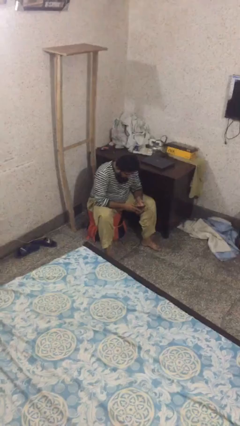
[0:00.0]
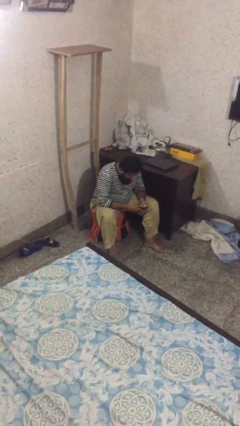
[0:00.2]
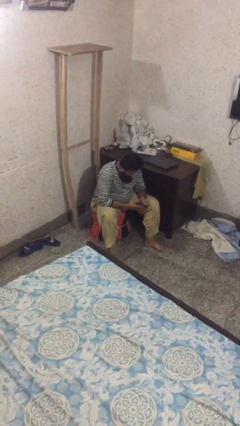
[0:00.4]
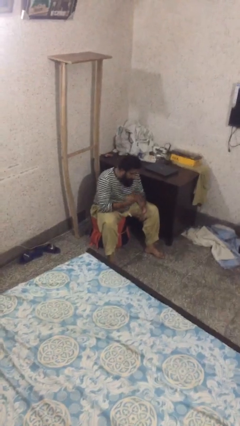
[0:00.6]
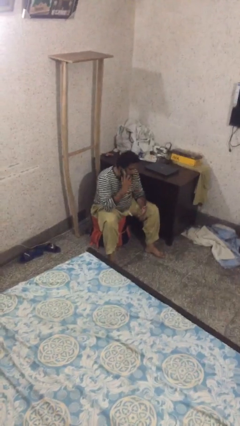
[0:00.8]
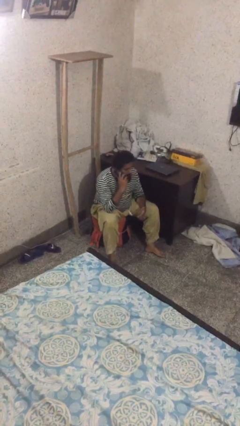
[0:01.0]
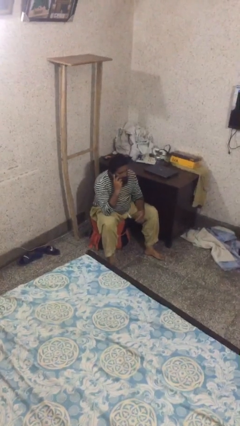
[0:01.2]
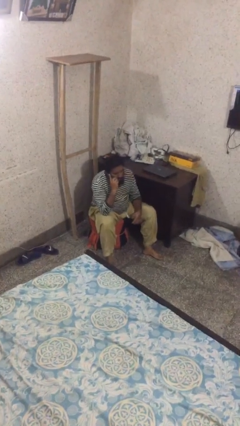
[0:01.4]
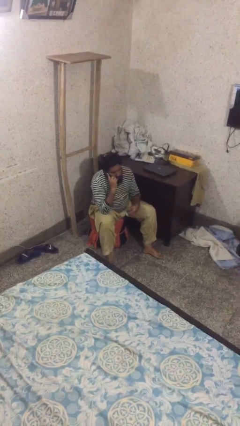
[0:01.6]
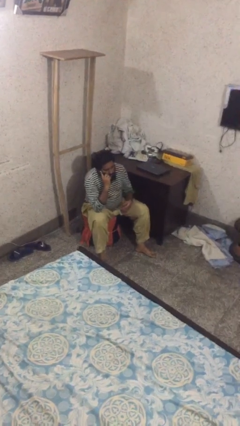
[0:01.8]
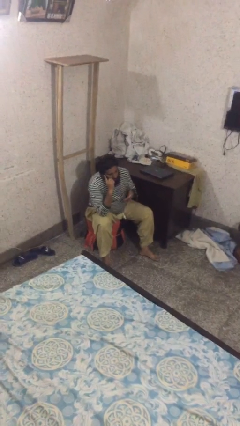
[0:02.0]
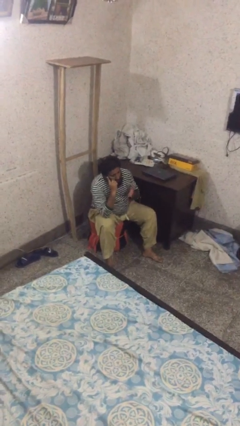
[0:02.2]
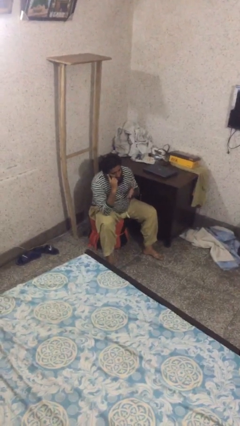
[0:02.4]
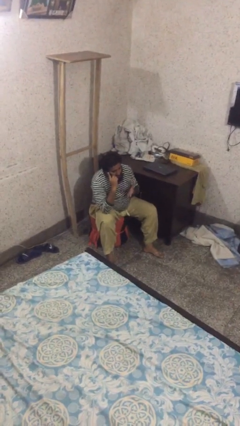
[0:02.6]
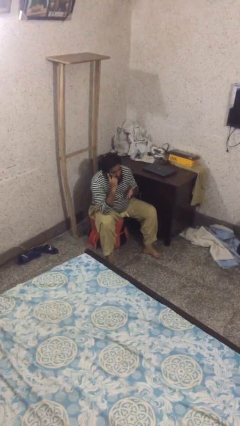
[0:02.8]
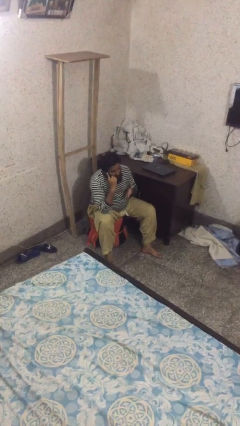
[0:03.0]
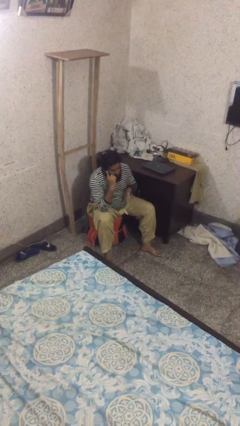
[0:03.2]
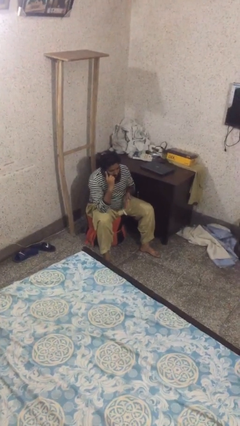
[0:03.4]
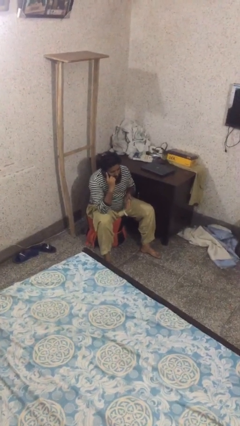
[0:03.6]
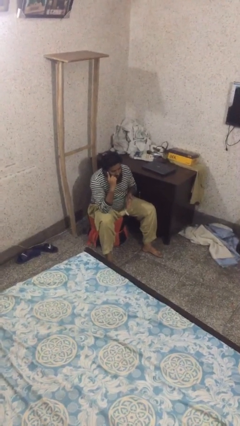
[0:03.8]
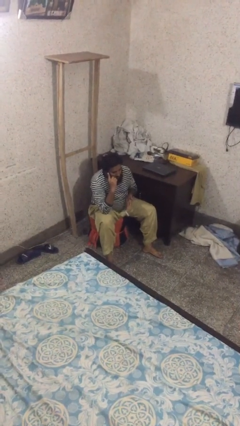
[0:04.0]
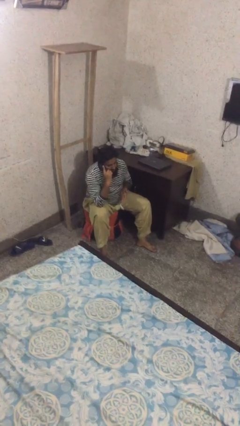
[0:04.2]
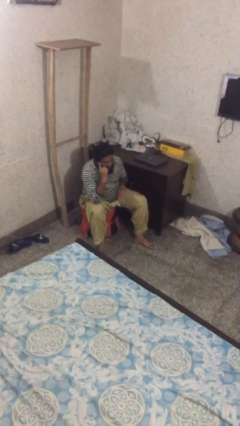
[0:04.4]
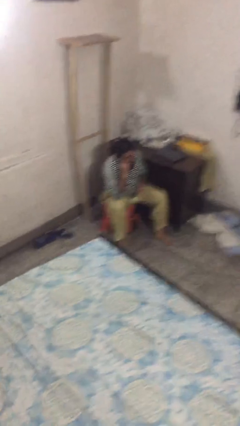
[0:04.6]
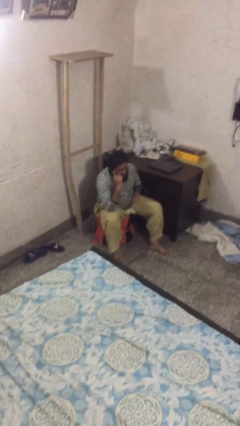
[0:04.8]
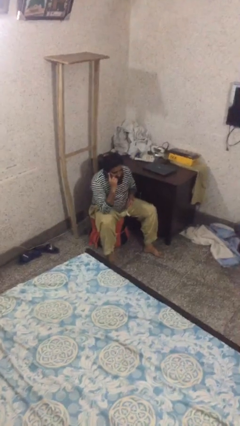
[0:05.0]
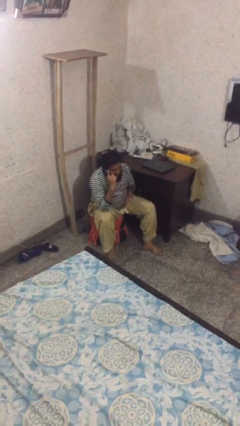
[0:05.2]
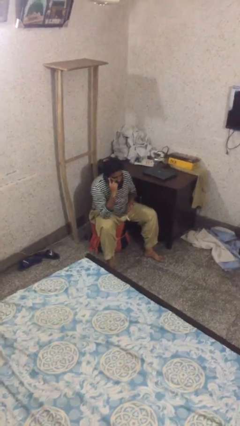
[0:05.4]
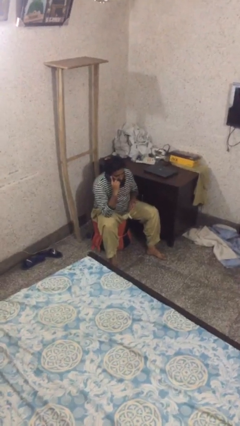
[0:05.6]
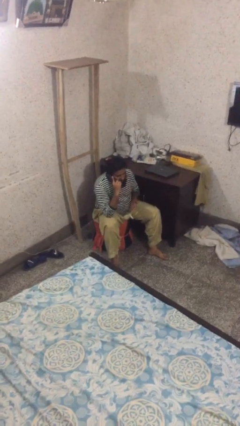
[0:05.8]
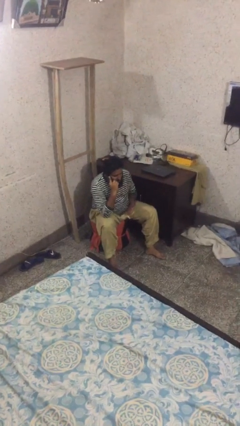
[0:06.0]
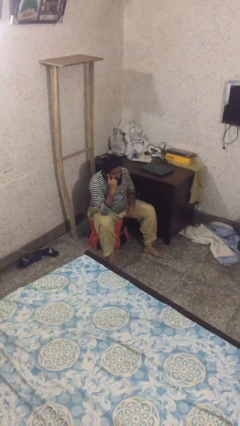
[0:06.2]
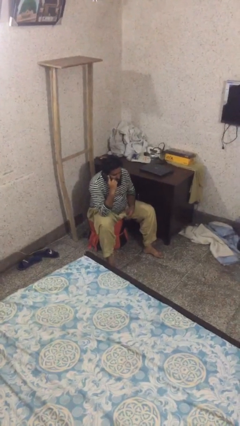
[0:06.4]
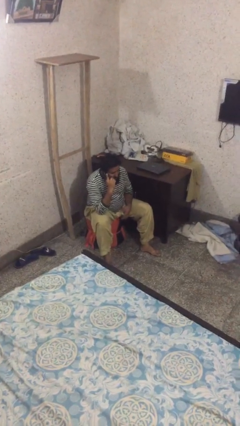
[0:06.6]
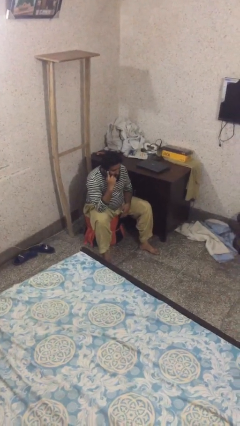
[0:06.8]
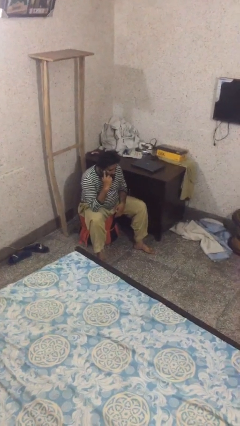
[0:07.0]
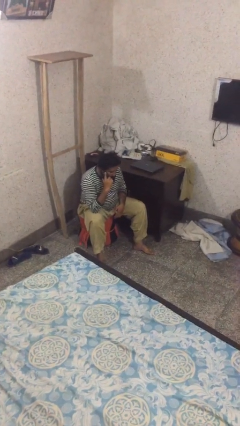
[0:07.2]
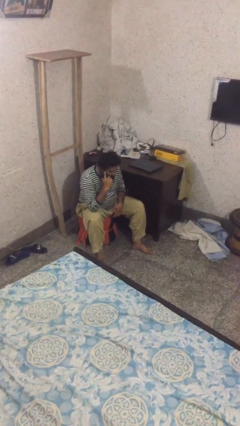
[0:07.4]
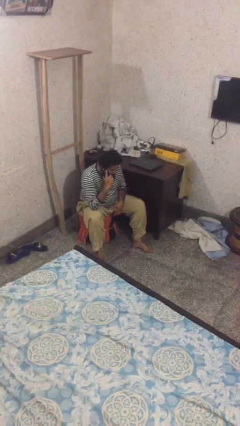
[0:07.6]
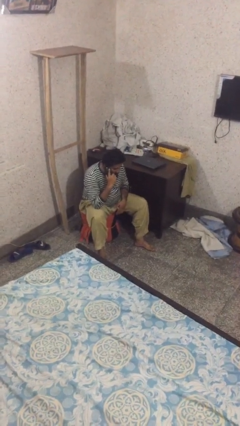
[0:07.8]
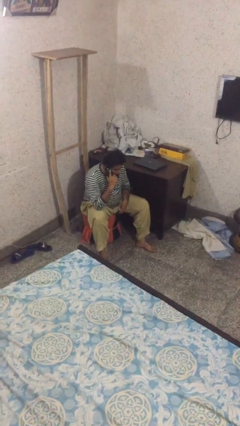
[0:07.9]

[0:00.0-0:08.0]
person talks on phone

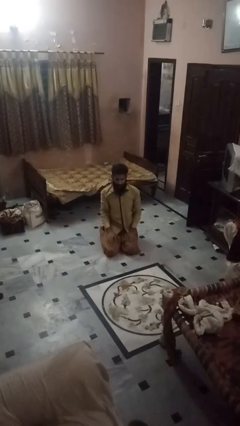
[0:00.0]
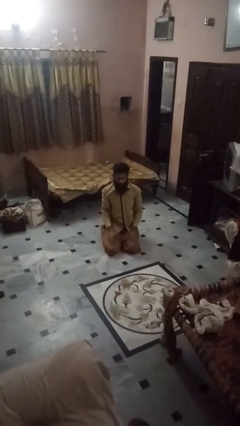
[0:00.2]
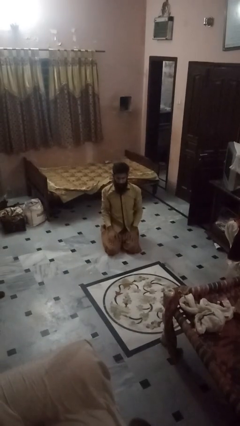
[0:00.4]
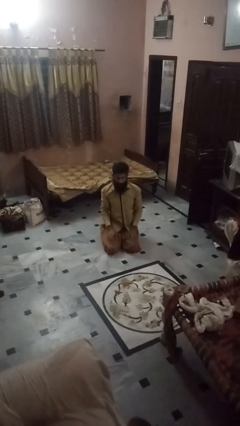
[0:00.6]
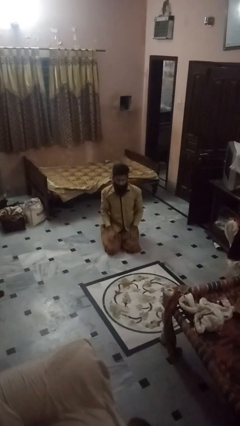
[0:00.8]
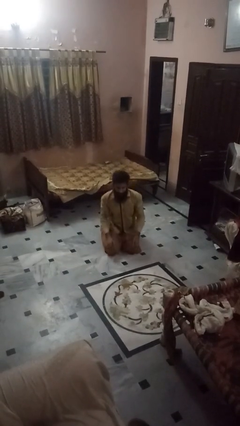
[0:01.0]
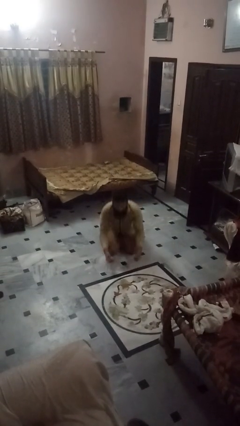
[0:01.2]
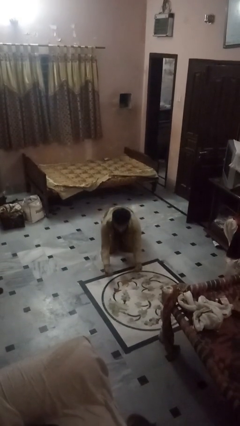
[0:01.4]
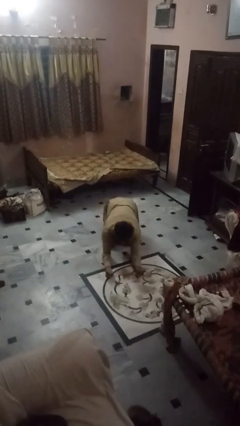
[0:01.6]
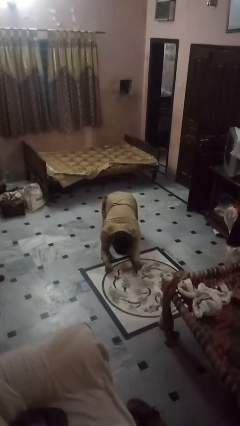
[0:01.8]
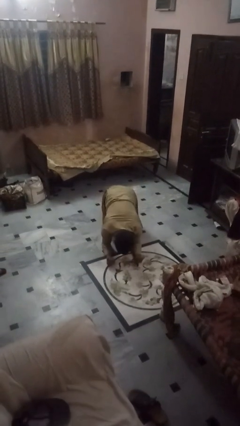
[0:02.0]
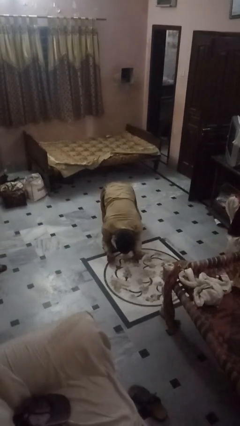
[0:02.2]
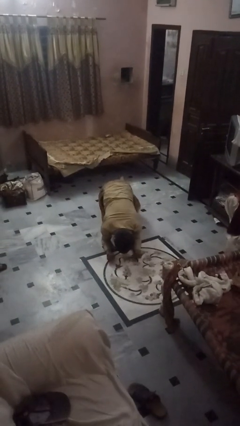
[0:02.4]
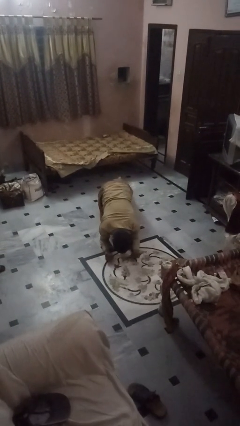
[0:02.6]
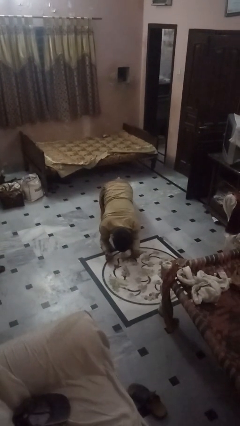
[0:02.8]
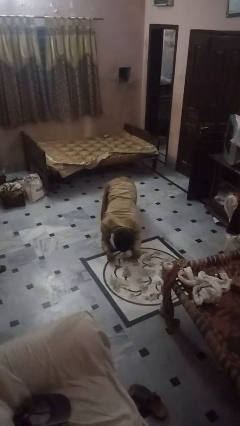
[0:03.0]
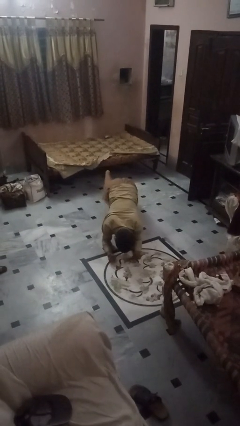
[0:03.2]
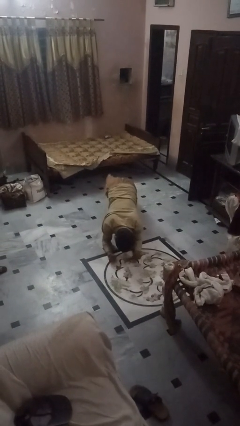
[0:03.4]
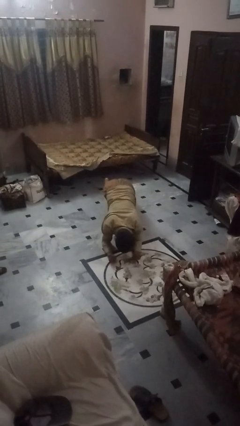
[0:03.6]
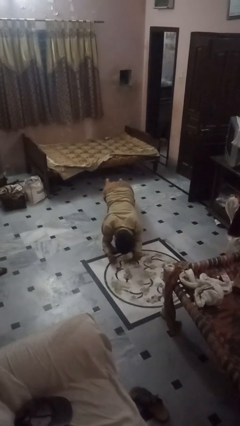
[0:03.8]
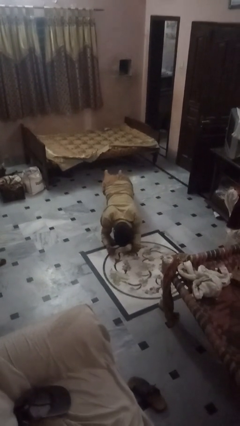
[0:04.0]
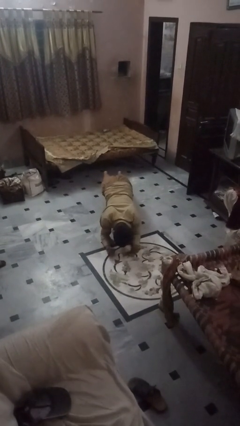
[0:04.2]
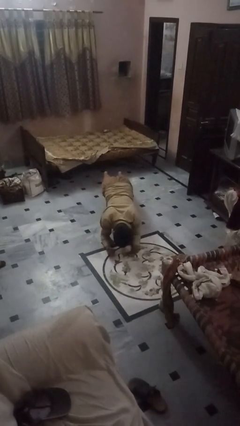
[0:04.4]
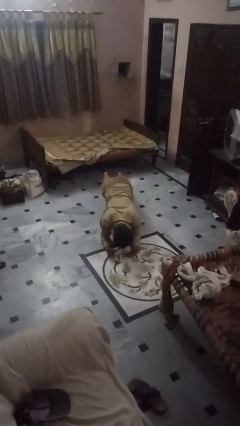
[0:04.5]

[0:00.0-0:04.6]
person exercises with plank

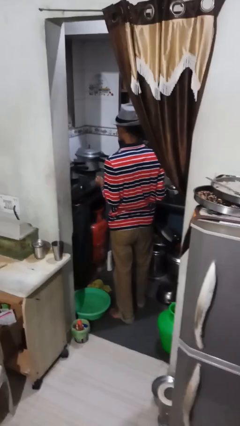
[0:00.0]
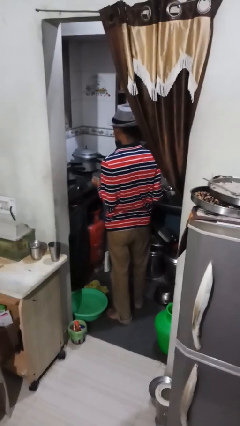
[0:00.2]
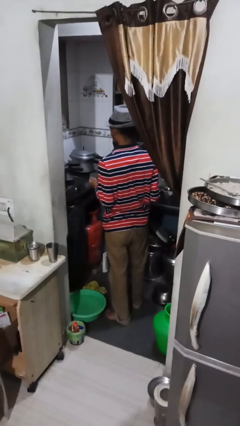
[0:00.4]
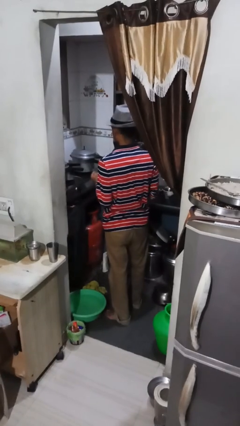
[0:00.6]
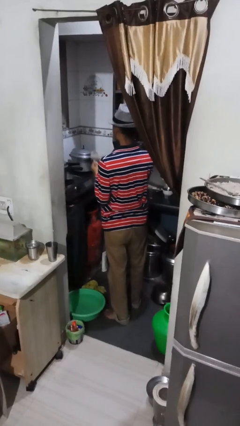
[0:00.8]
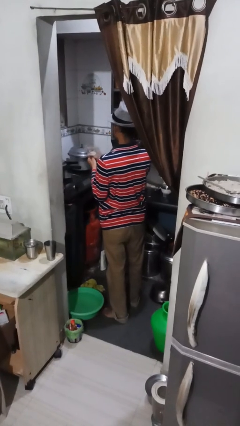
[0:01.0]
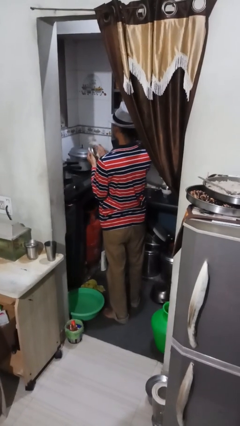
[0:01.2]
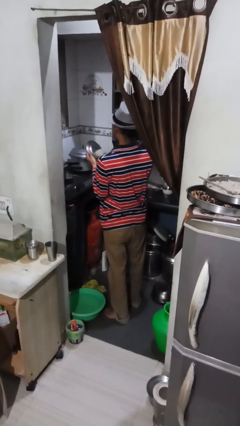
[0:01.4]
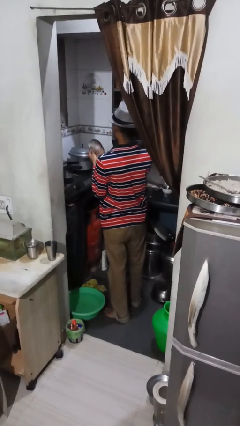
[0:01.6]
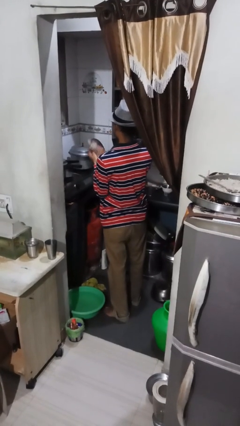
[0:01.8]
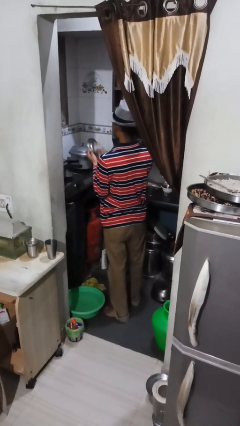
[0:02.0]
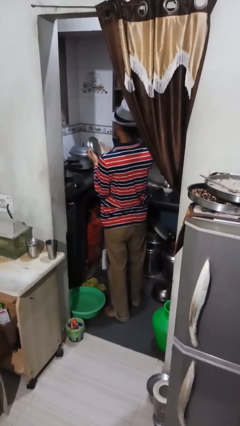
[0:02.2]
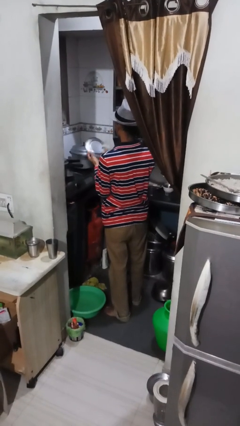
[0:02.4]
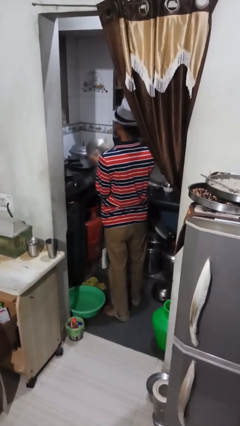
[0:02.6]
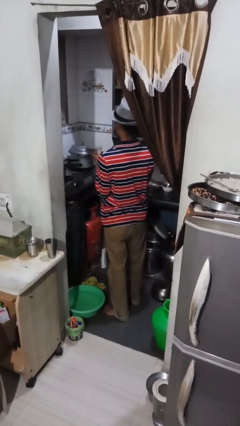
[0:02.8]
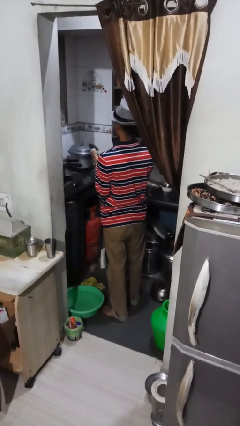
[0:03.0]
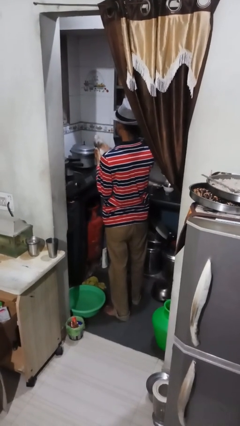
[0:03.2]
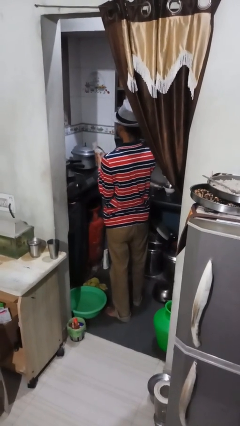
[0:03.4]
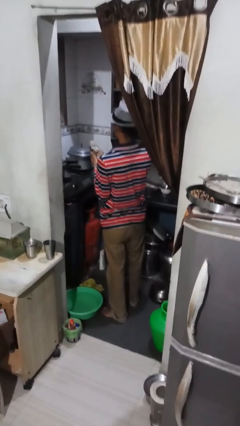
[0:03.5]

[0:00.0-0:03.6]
person dries dish

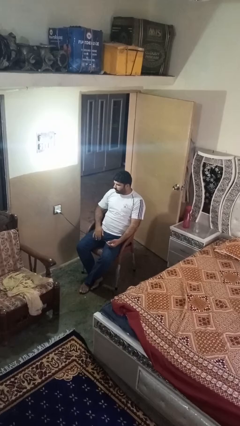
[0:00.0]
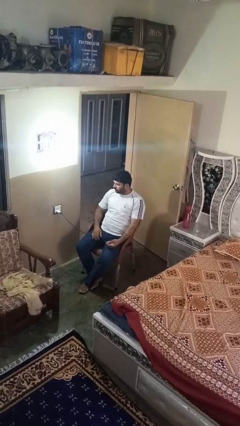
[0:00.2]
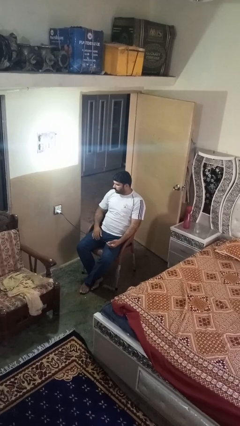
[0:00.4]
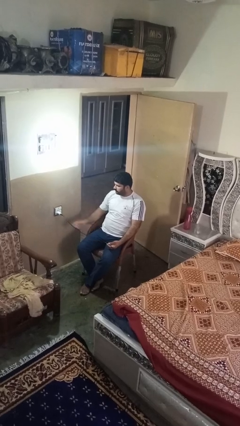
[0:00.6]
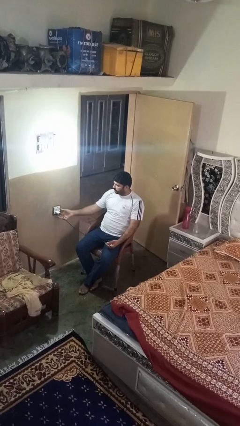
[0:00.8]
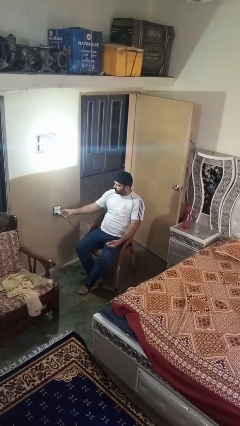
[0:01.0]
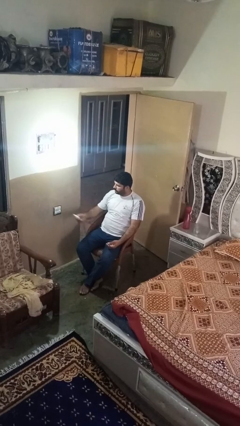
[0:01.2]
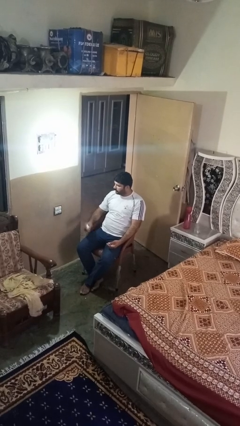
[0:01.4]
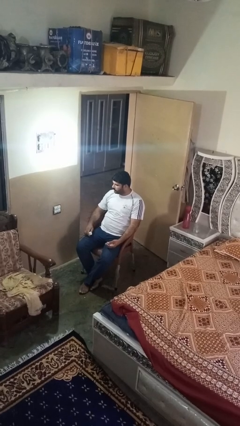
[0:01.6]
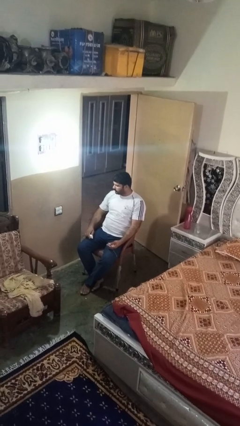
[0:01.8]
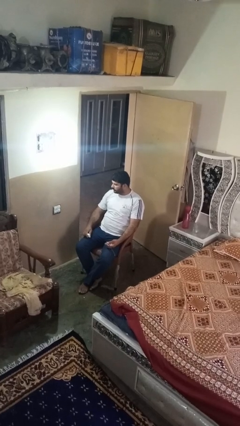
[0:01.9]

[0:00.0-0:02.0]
person unplugs from electrical socket
